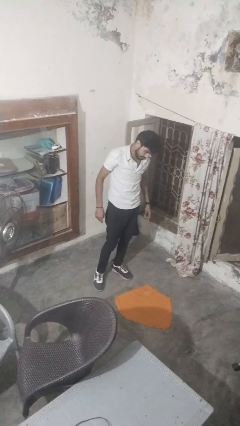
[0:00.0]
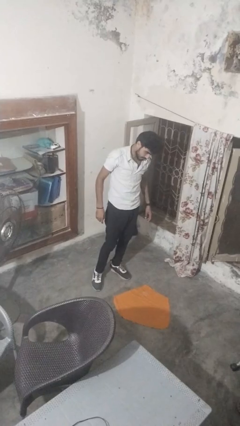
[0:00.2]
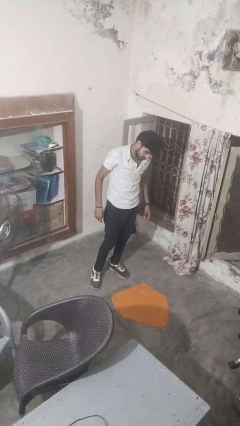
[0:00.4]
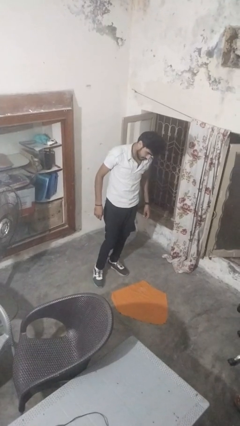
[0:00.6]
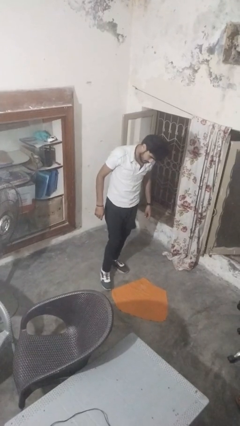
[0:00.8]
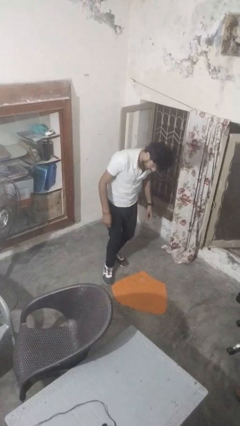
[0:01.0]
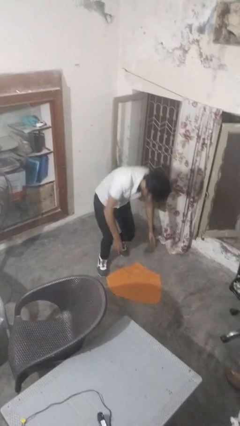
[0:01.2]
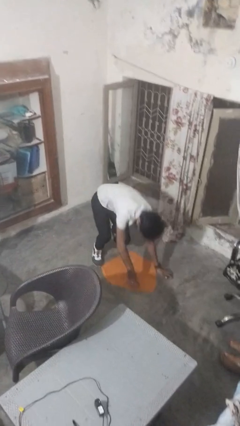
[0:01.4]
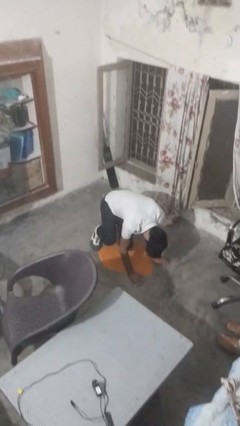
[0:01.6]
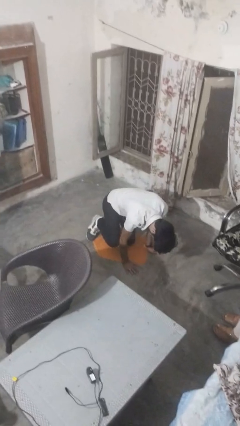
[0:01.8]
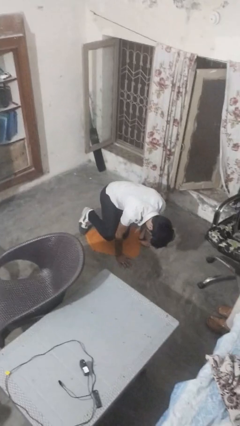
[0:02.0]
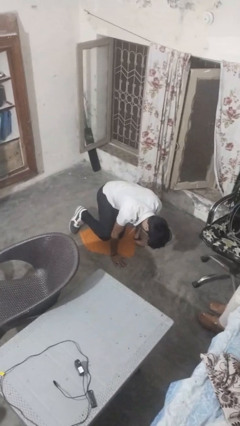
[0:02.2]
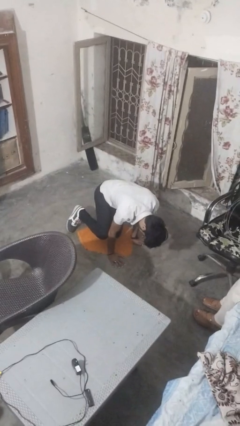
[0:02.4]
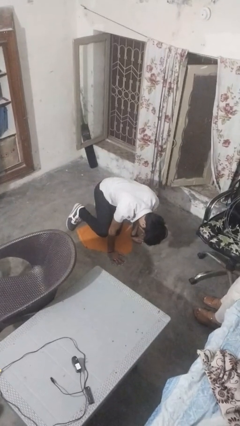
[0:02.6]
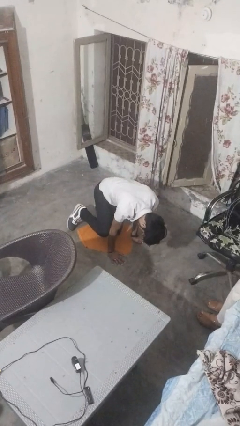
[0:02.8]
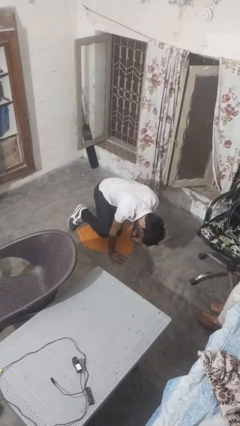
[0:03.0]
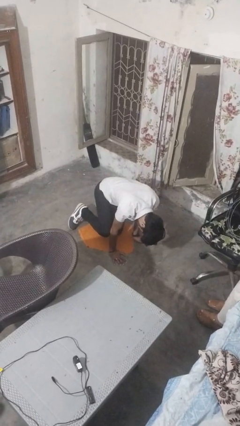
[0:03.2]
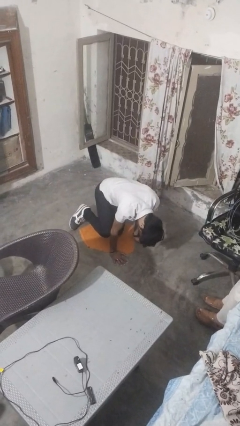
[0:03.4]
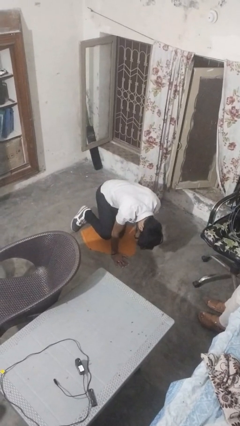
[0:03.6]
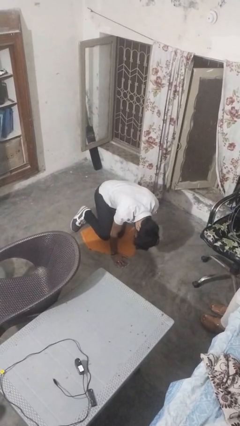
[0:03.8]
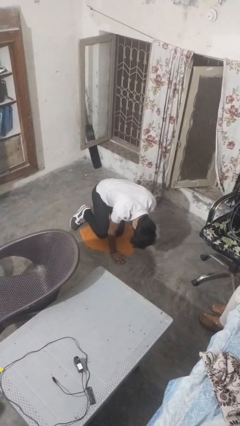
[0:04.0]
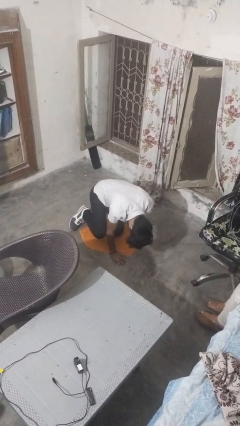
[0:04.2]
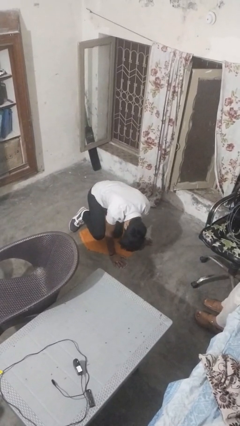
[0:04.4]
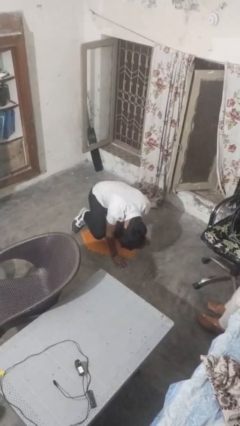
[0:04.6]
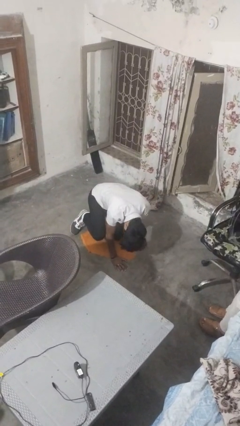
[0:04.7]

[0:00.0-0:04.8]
person falls while standing

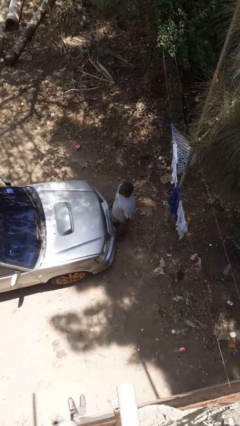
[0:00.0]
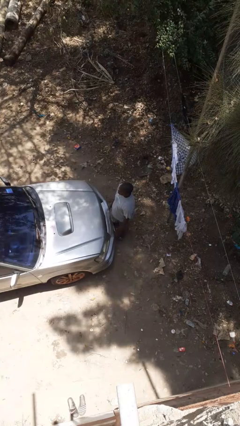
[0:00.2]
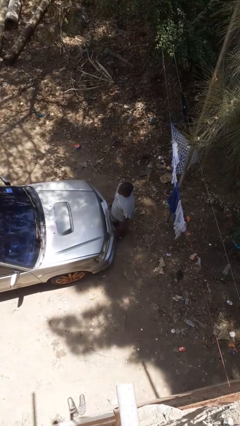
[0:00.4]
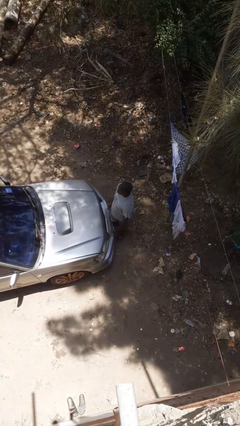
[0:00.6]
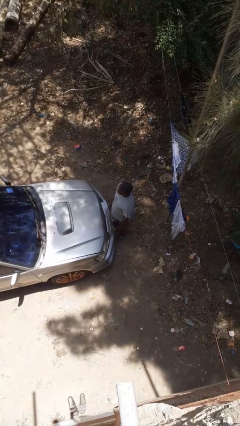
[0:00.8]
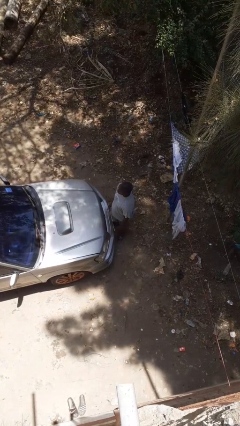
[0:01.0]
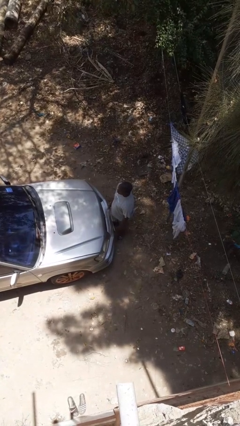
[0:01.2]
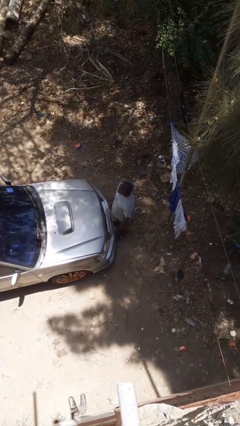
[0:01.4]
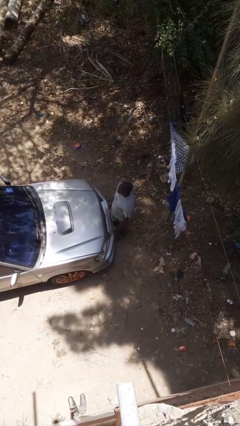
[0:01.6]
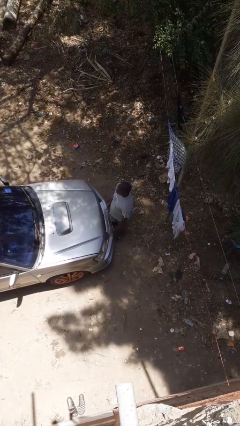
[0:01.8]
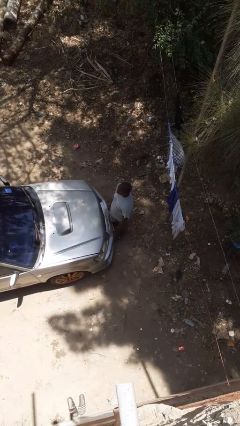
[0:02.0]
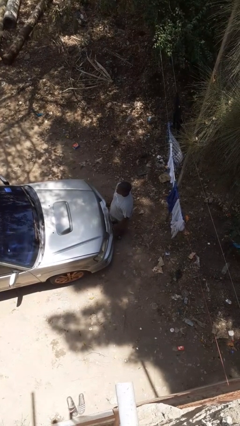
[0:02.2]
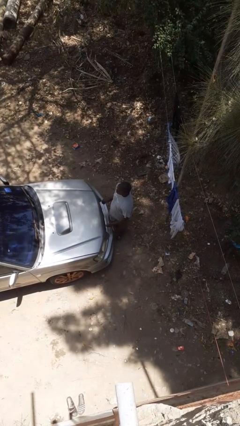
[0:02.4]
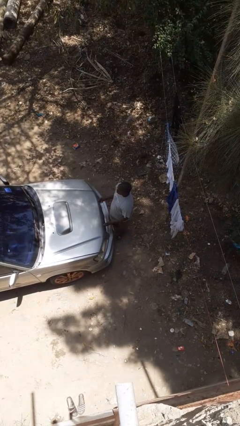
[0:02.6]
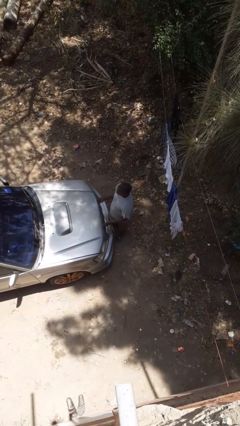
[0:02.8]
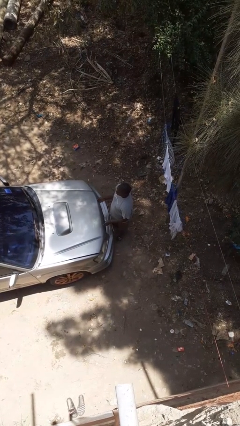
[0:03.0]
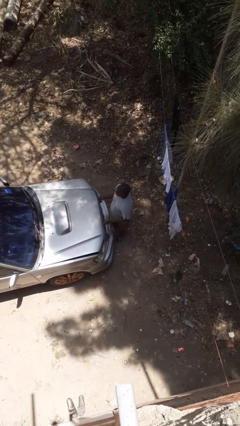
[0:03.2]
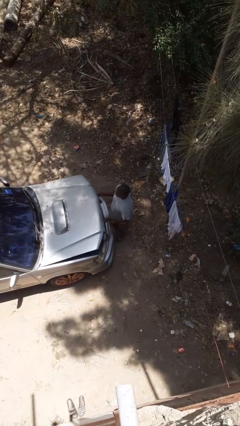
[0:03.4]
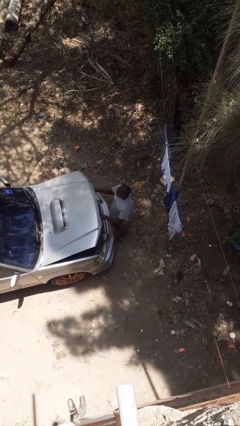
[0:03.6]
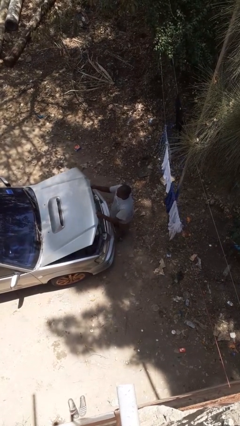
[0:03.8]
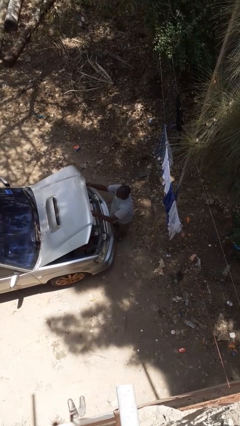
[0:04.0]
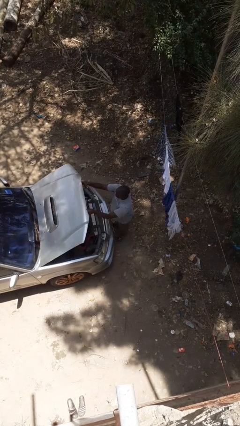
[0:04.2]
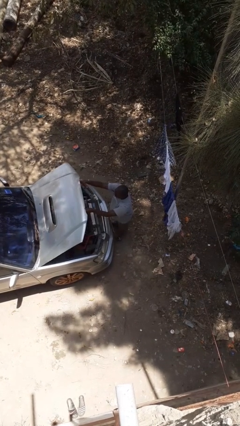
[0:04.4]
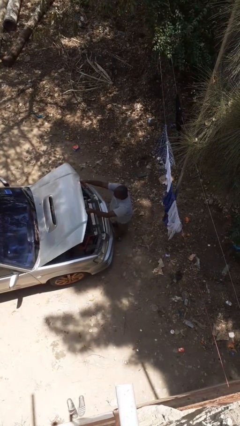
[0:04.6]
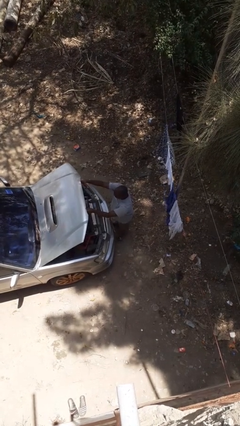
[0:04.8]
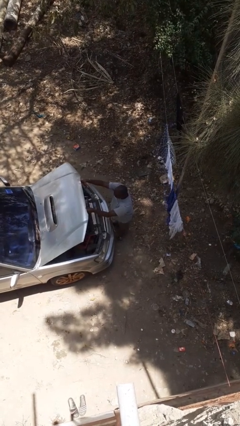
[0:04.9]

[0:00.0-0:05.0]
person opens car hood

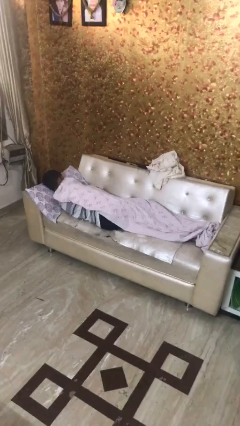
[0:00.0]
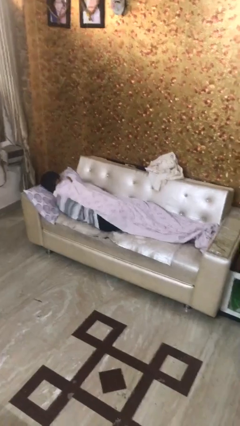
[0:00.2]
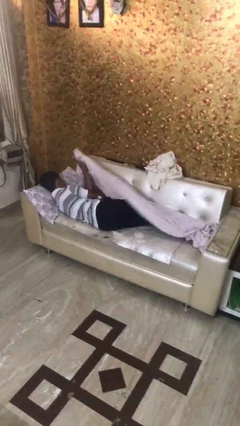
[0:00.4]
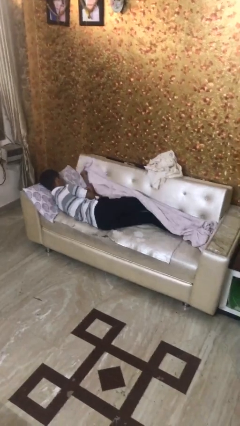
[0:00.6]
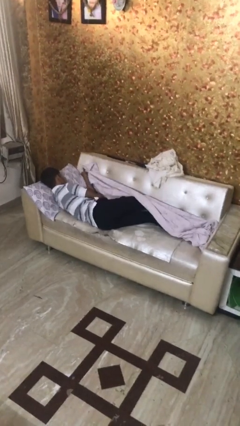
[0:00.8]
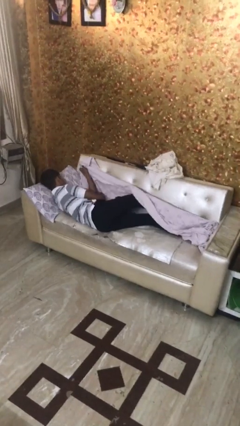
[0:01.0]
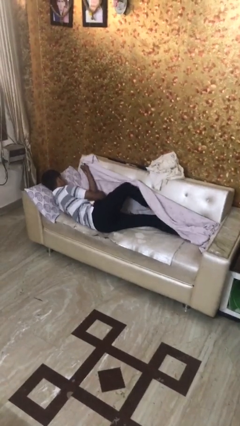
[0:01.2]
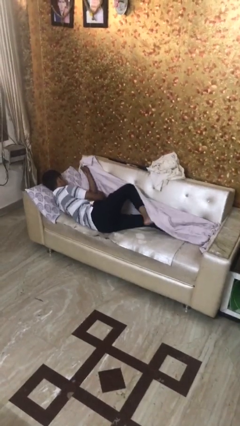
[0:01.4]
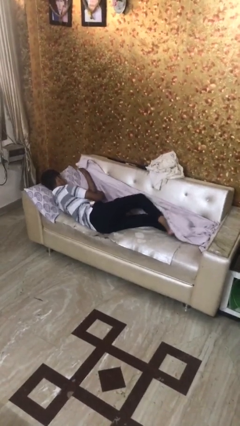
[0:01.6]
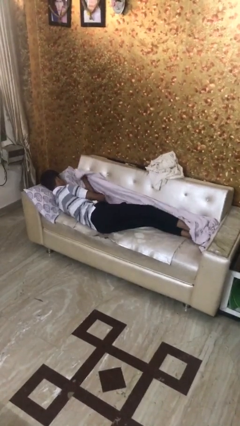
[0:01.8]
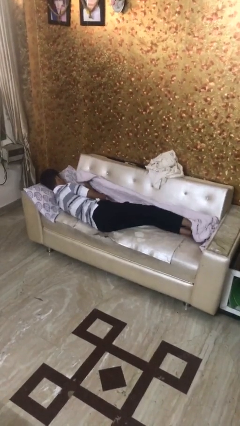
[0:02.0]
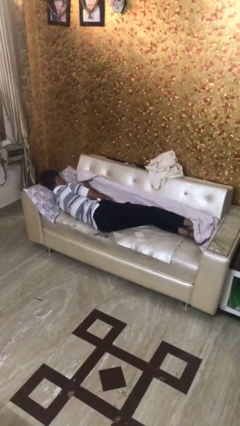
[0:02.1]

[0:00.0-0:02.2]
person uncovers with bedsheets

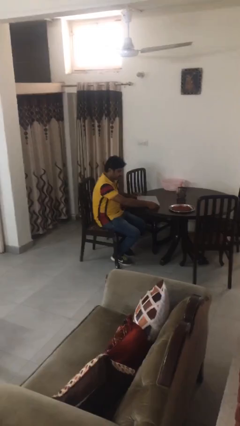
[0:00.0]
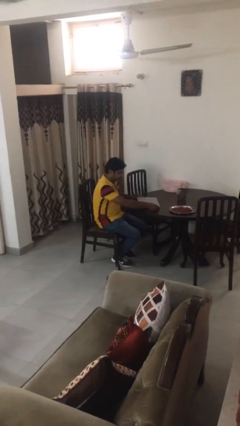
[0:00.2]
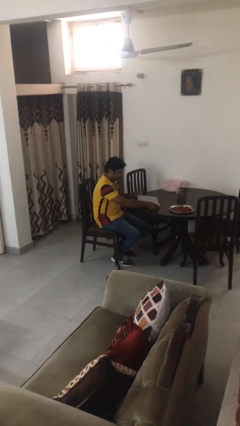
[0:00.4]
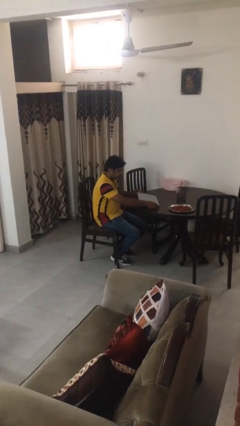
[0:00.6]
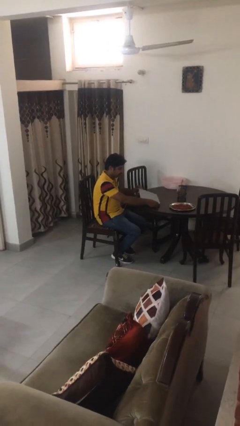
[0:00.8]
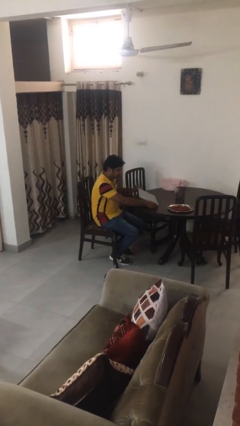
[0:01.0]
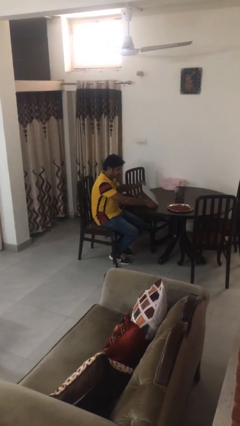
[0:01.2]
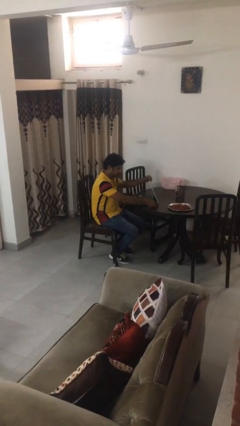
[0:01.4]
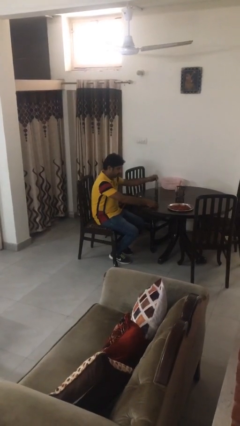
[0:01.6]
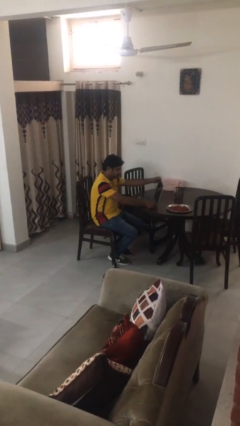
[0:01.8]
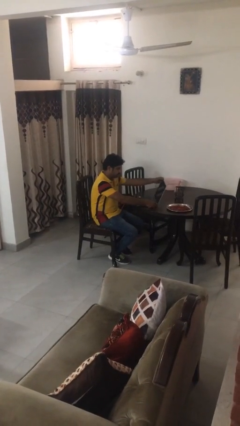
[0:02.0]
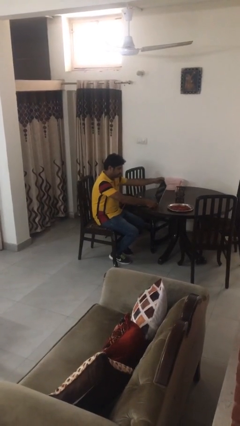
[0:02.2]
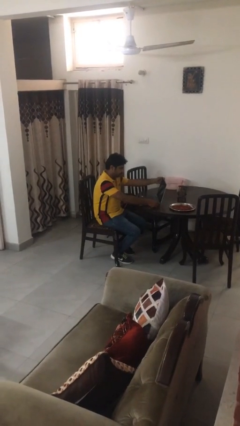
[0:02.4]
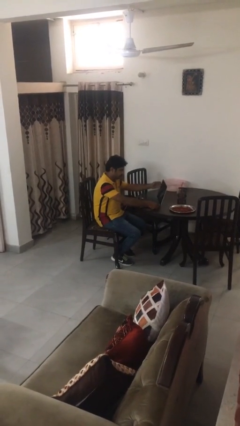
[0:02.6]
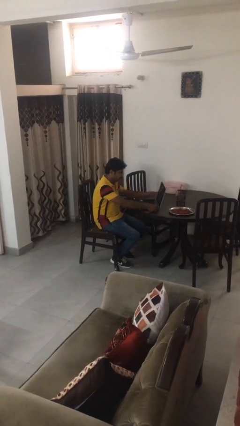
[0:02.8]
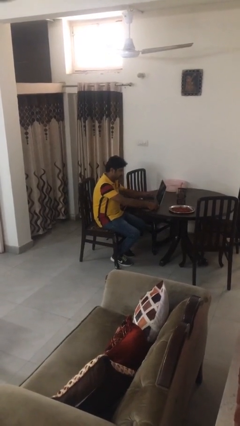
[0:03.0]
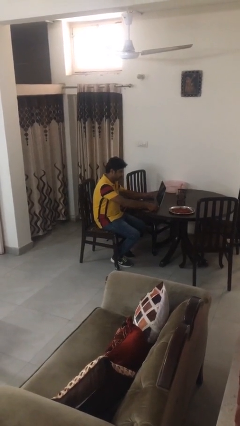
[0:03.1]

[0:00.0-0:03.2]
person opens laptop

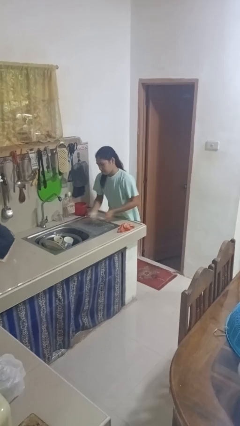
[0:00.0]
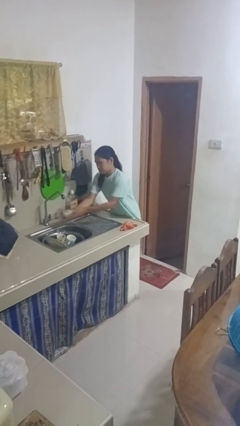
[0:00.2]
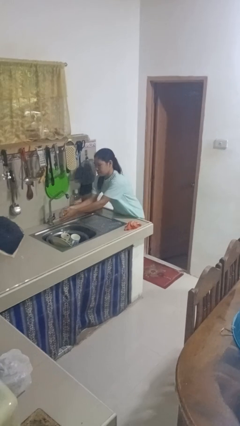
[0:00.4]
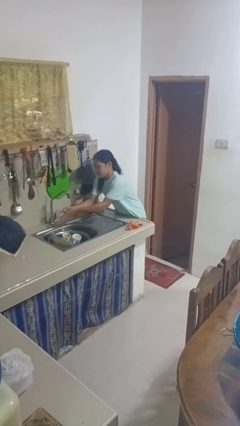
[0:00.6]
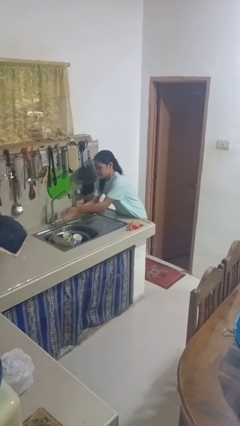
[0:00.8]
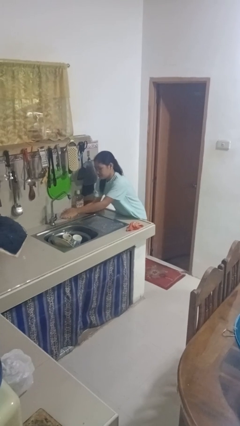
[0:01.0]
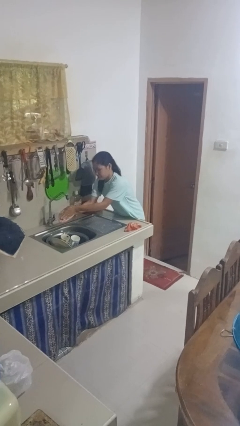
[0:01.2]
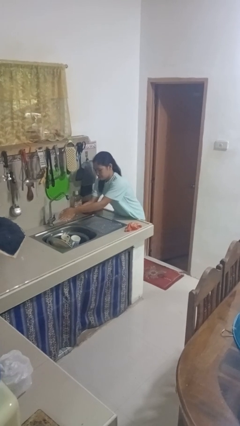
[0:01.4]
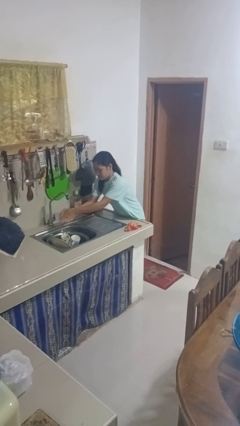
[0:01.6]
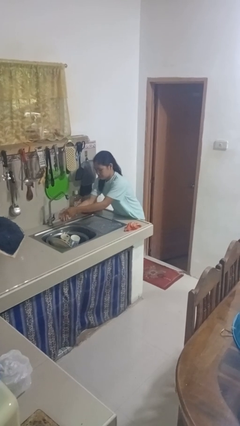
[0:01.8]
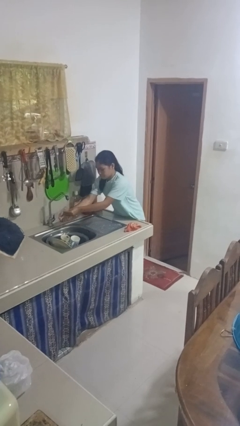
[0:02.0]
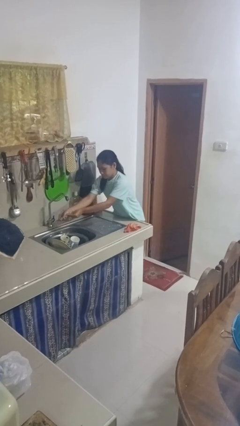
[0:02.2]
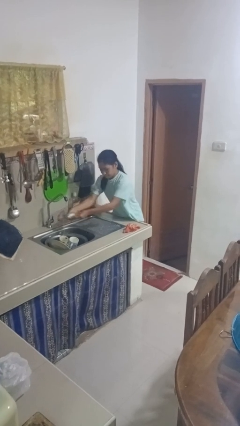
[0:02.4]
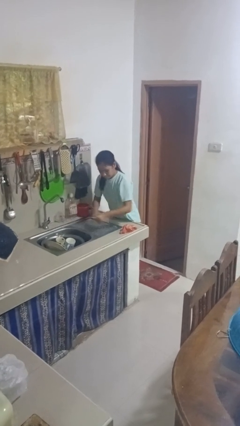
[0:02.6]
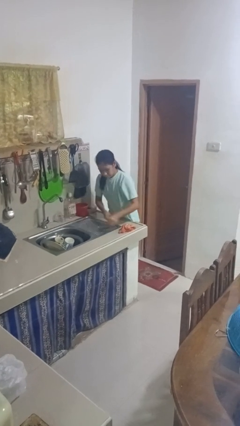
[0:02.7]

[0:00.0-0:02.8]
person washes hands
